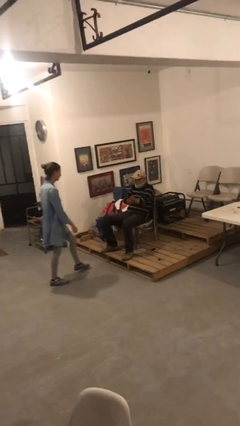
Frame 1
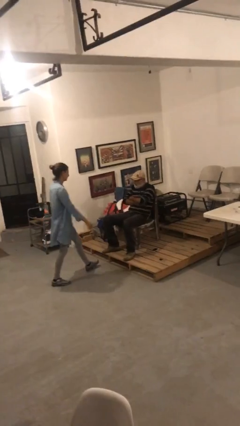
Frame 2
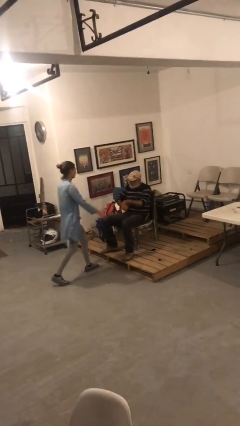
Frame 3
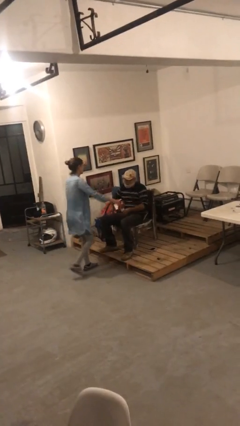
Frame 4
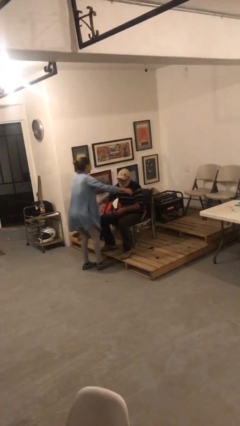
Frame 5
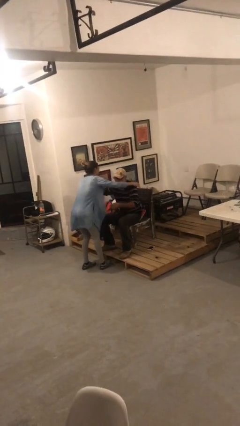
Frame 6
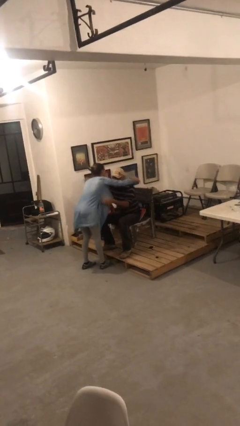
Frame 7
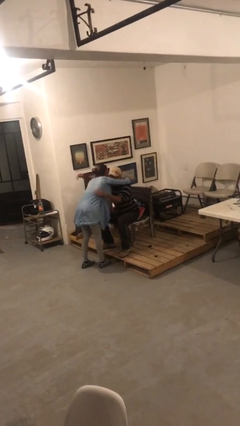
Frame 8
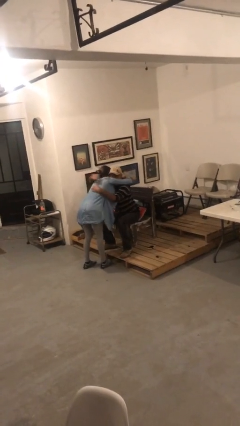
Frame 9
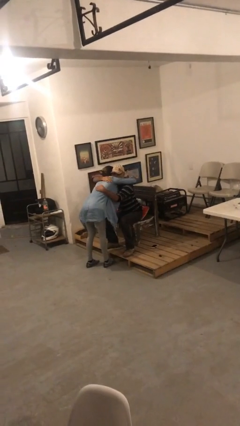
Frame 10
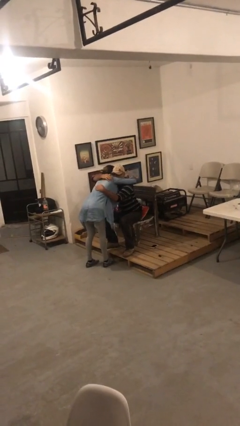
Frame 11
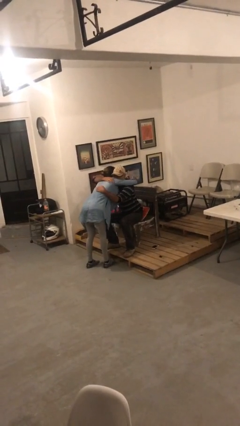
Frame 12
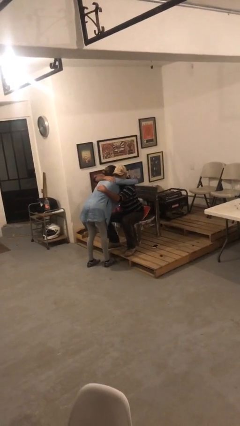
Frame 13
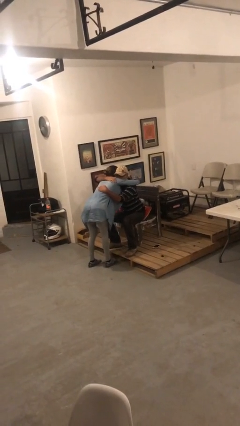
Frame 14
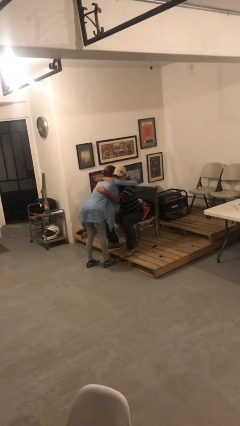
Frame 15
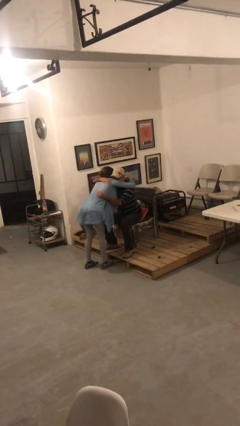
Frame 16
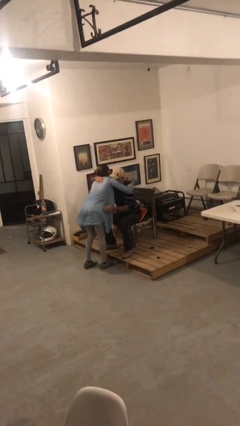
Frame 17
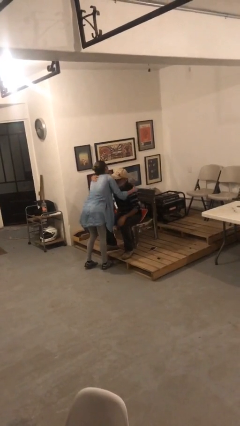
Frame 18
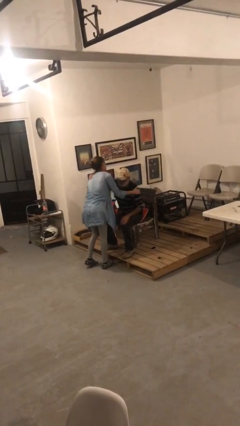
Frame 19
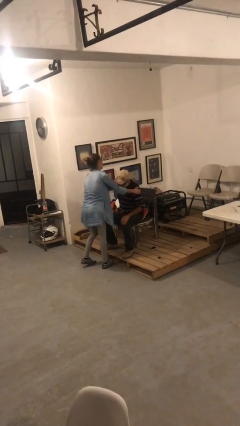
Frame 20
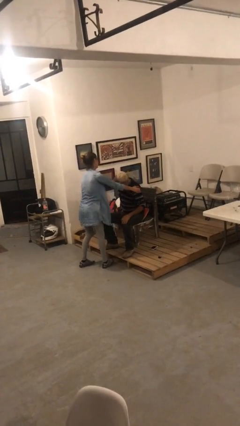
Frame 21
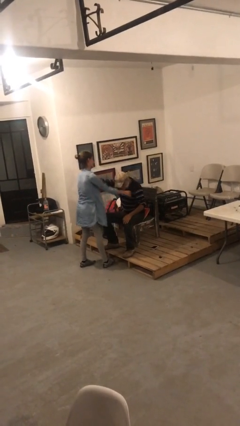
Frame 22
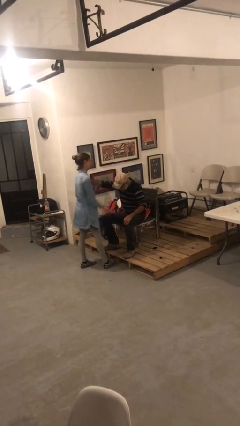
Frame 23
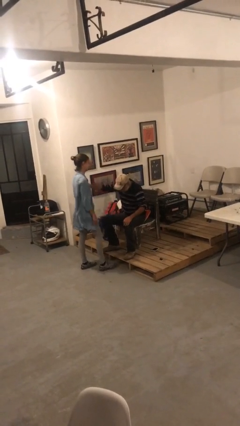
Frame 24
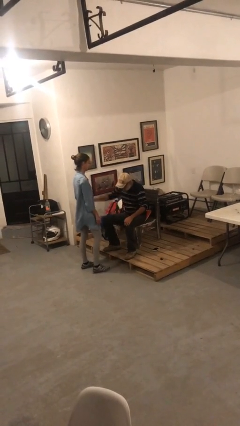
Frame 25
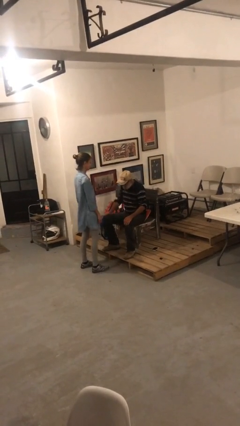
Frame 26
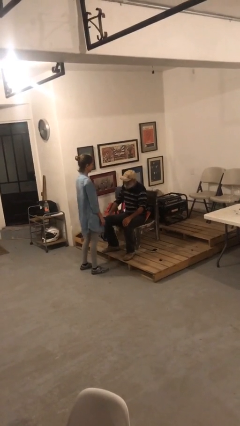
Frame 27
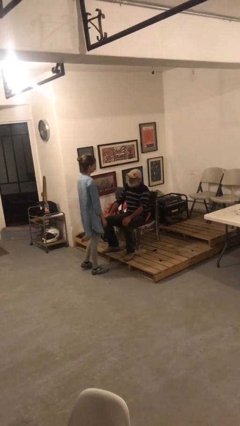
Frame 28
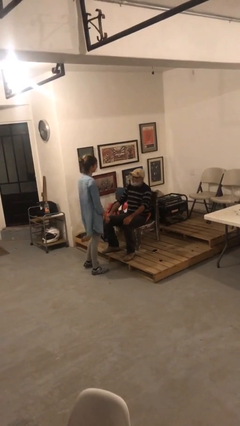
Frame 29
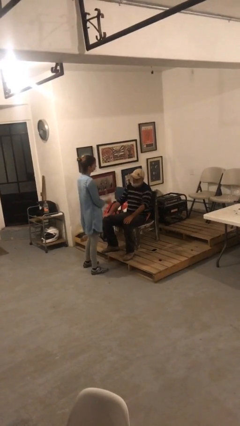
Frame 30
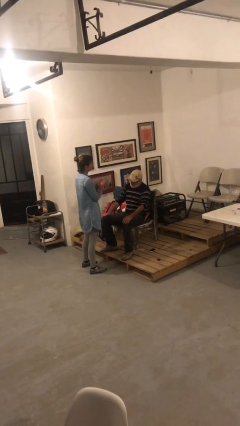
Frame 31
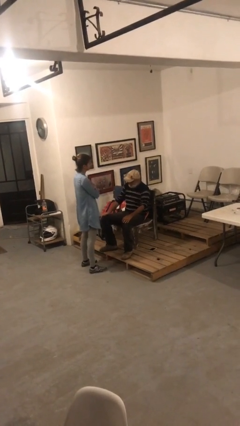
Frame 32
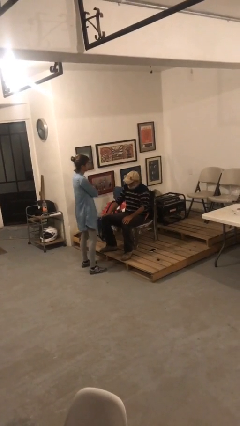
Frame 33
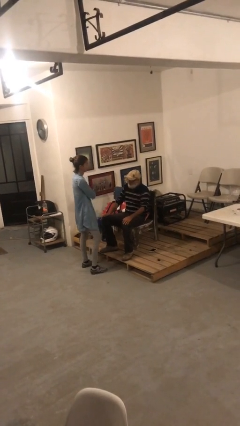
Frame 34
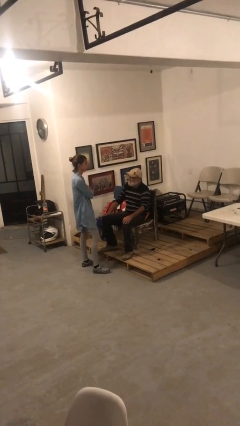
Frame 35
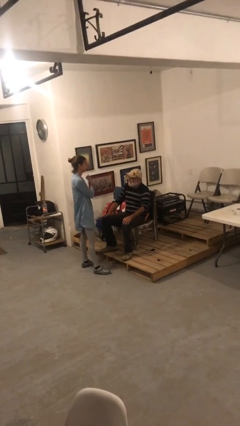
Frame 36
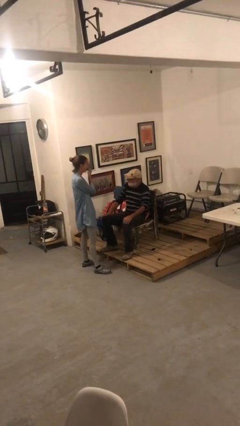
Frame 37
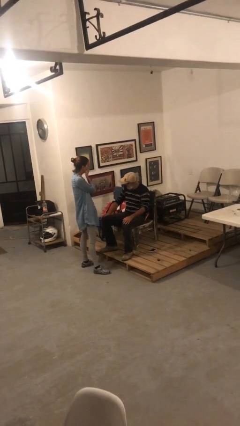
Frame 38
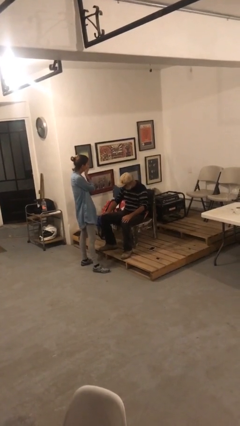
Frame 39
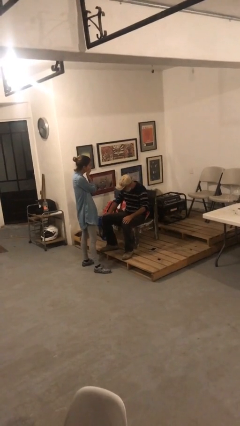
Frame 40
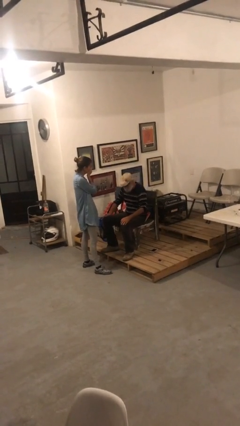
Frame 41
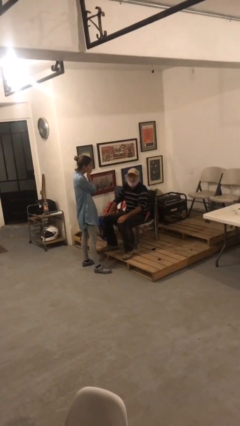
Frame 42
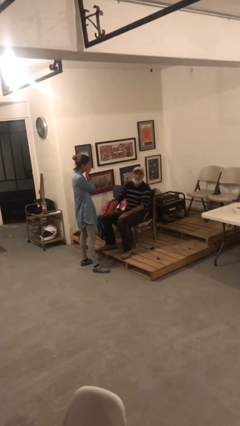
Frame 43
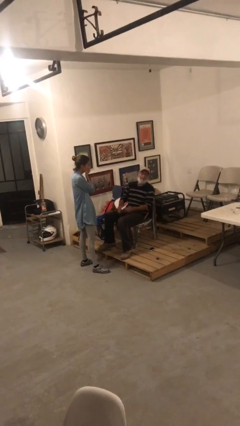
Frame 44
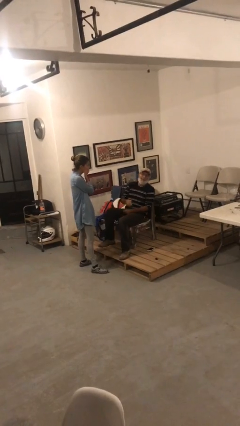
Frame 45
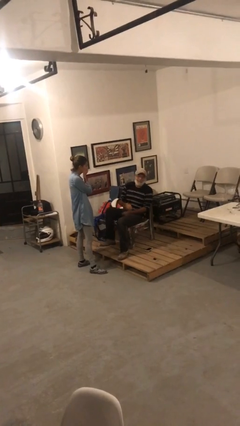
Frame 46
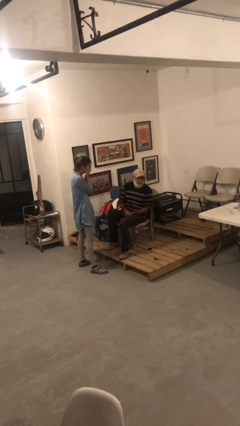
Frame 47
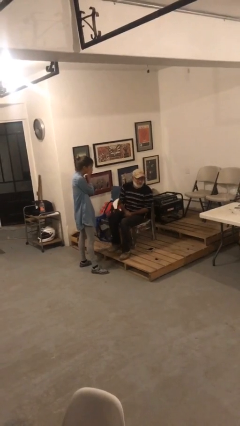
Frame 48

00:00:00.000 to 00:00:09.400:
person embraces person

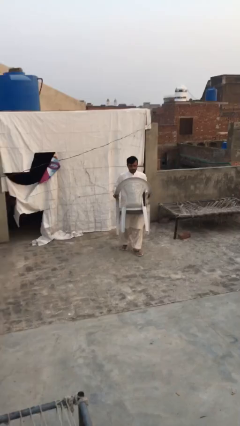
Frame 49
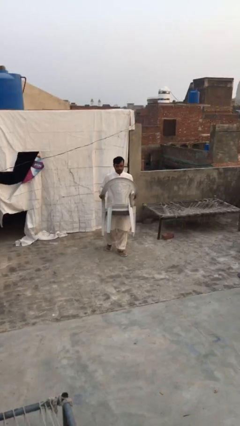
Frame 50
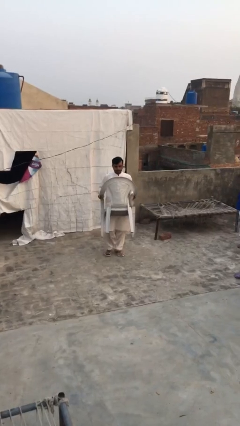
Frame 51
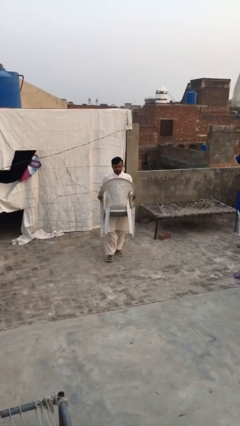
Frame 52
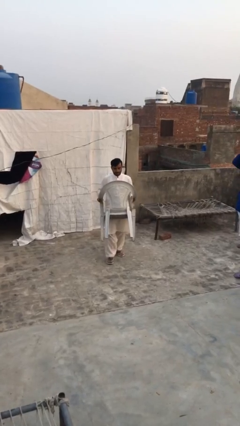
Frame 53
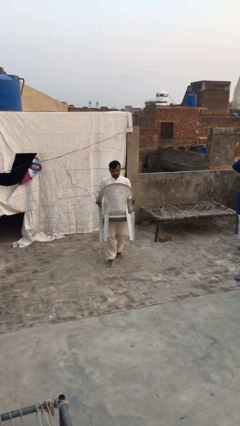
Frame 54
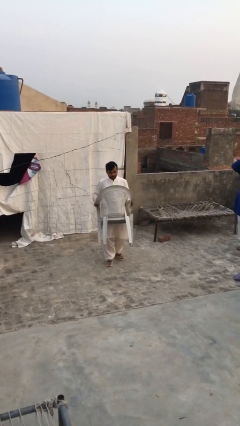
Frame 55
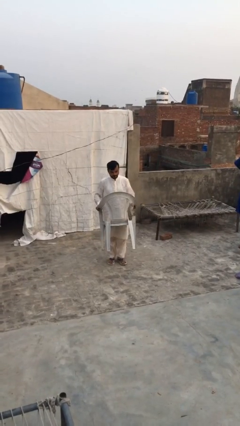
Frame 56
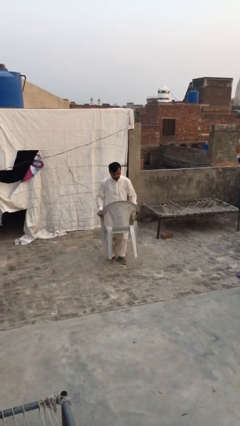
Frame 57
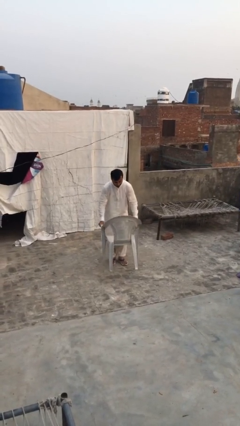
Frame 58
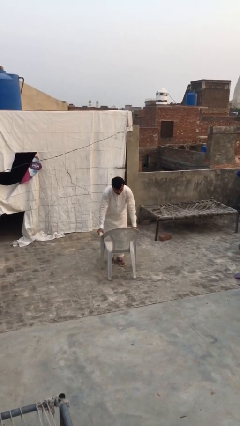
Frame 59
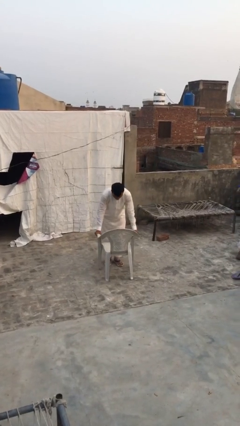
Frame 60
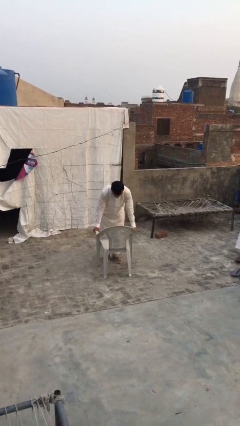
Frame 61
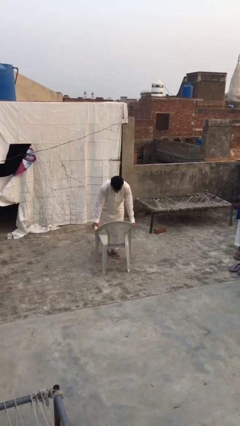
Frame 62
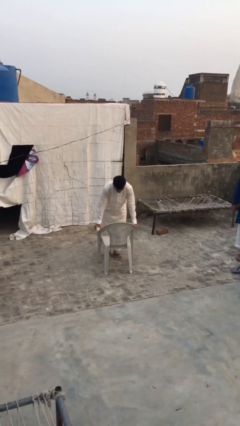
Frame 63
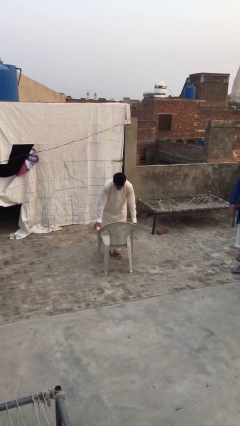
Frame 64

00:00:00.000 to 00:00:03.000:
person puts down object on floor

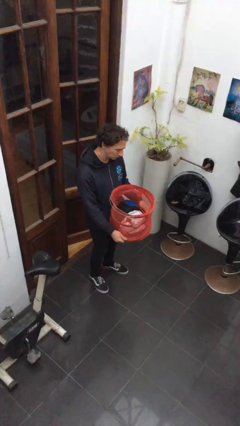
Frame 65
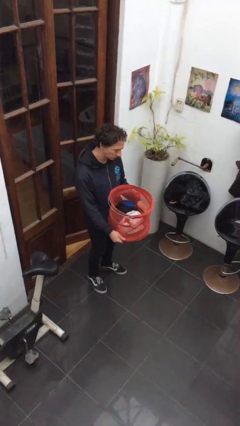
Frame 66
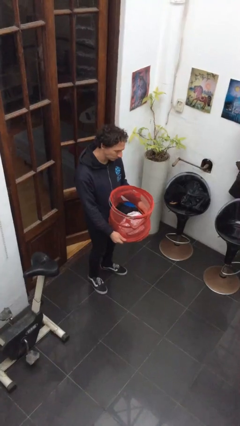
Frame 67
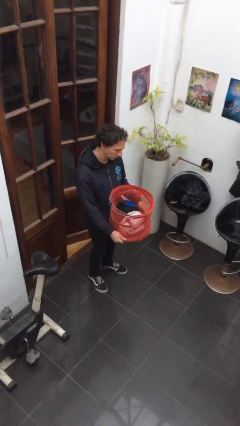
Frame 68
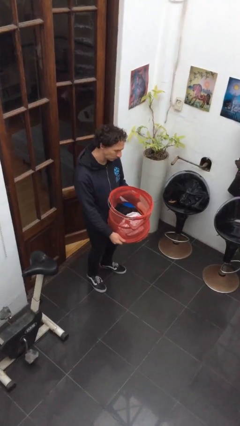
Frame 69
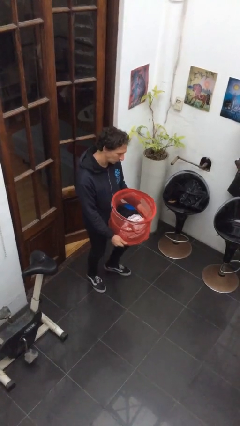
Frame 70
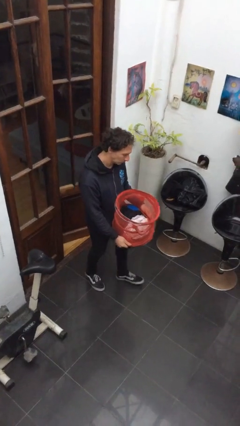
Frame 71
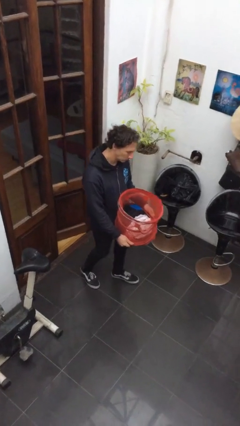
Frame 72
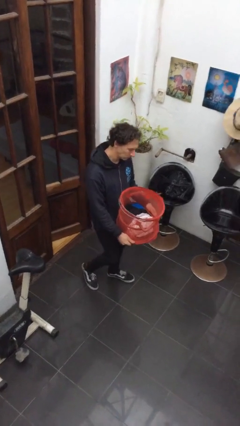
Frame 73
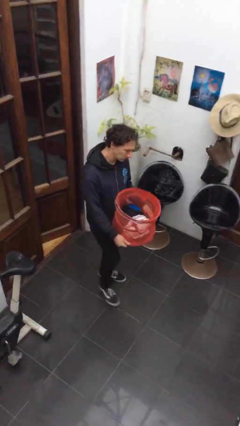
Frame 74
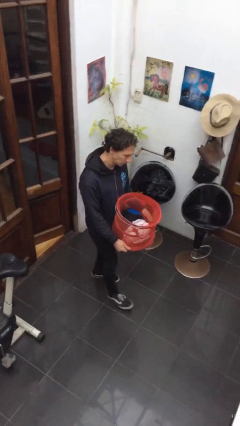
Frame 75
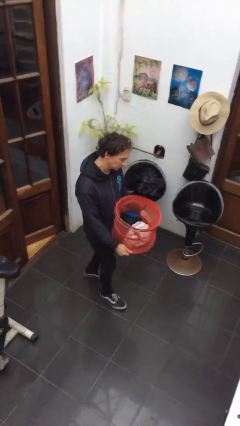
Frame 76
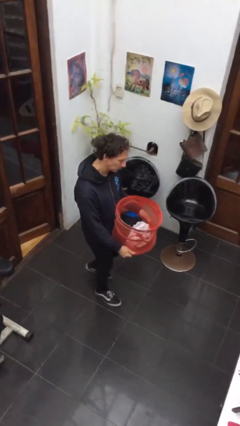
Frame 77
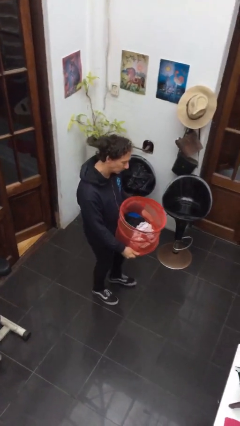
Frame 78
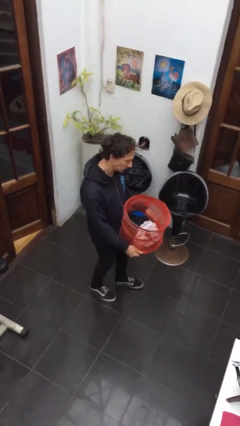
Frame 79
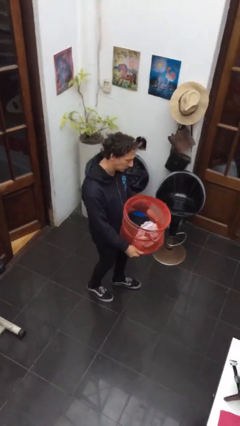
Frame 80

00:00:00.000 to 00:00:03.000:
person carries laundry basket

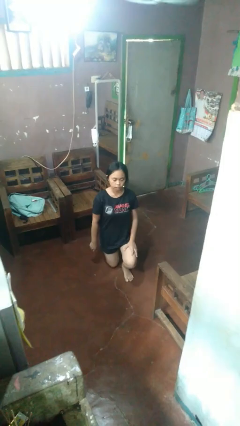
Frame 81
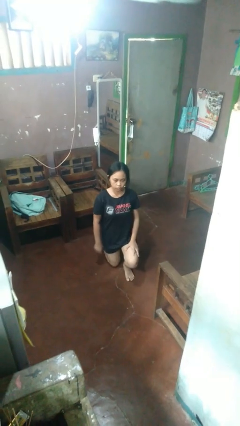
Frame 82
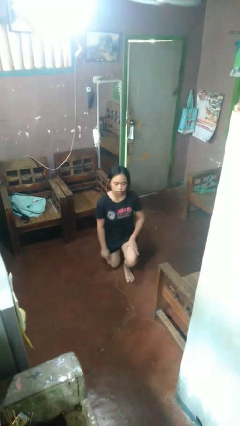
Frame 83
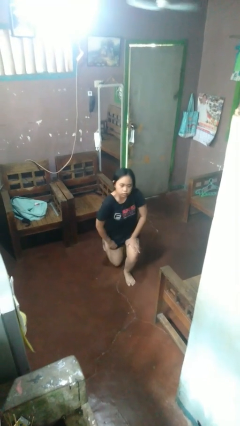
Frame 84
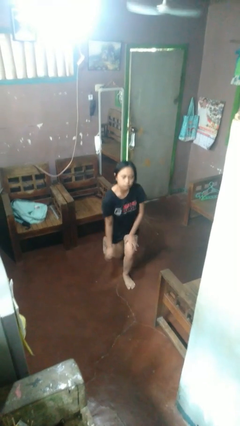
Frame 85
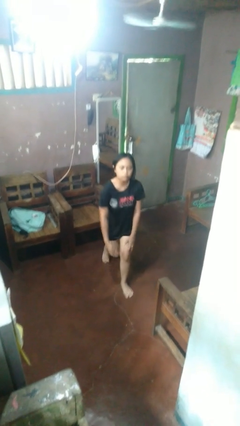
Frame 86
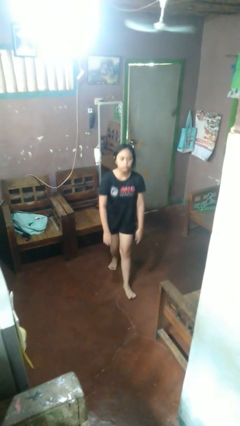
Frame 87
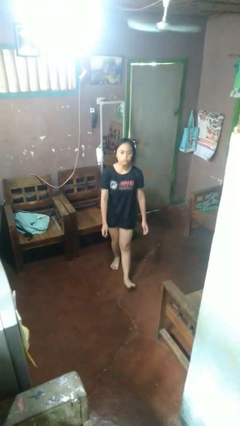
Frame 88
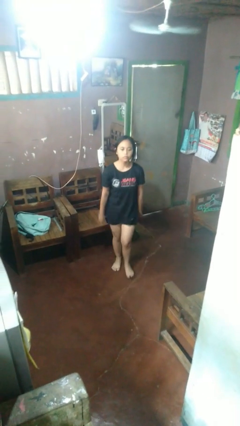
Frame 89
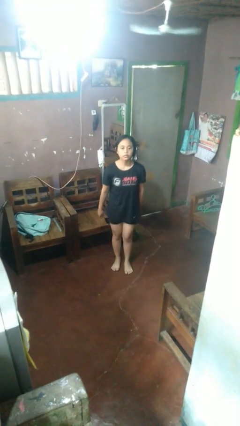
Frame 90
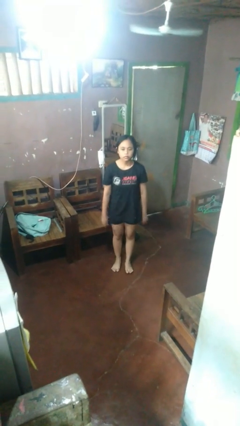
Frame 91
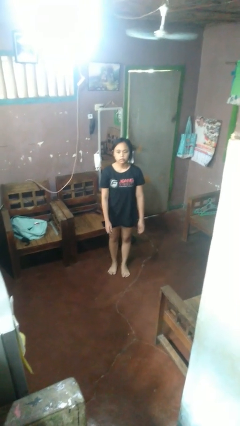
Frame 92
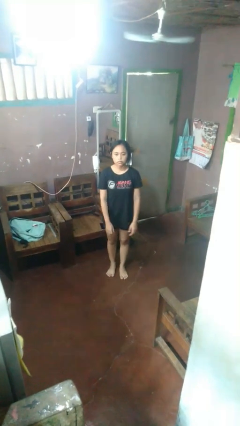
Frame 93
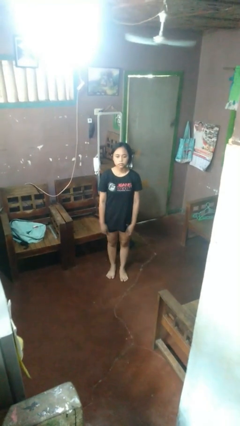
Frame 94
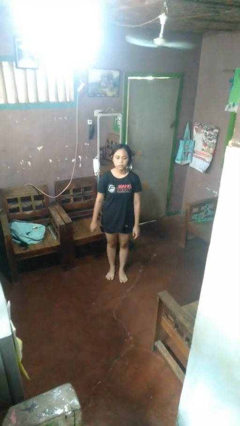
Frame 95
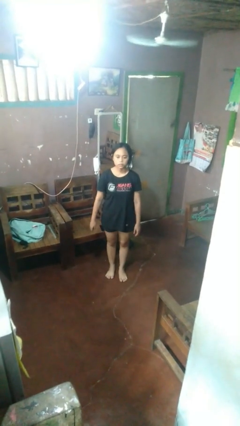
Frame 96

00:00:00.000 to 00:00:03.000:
person stands up from floor
